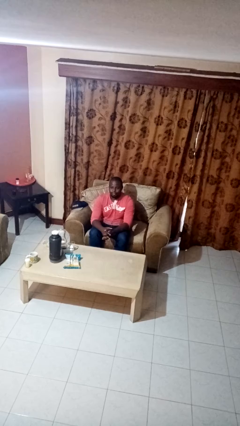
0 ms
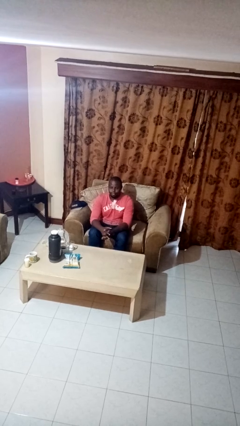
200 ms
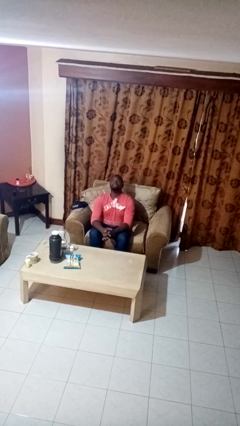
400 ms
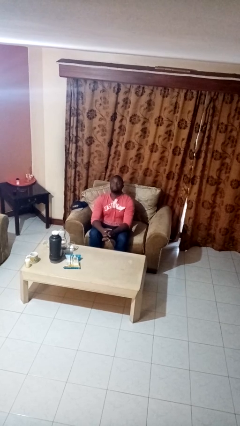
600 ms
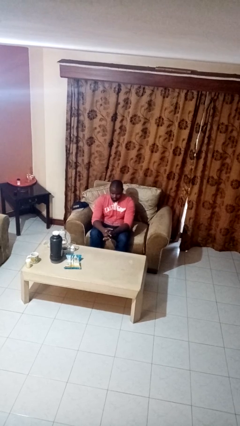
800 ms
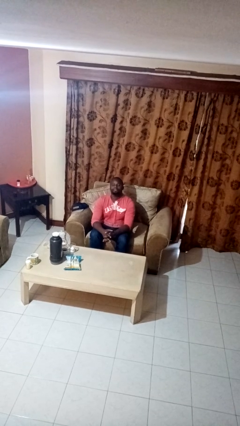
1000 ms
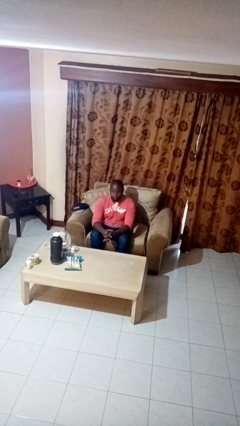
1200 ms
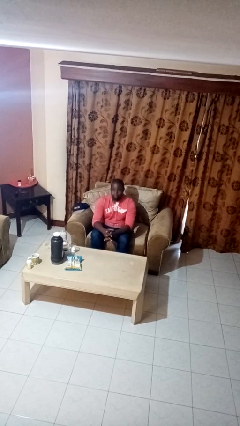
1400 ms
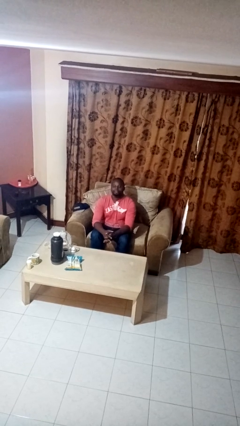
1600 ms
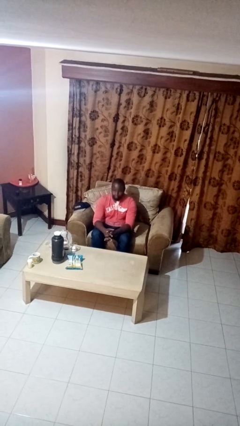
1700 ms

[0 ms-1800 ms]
person nods head

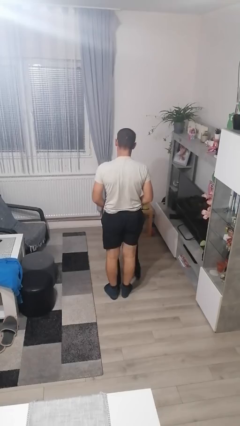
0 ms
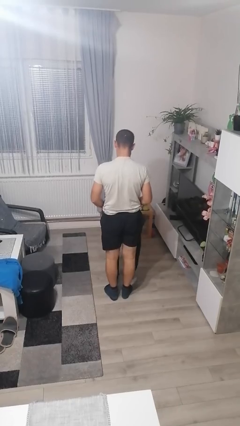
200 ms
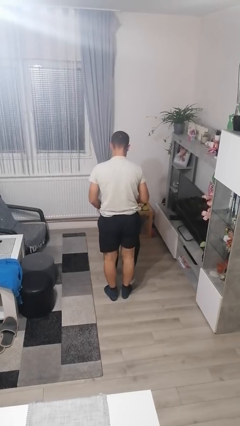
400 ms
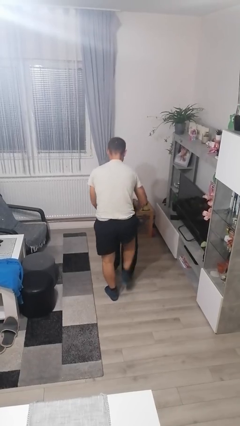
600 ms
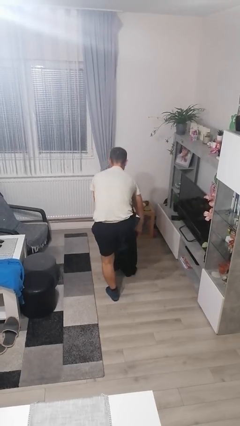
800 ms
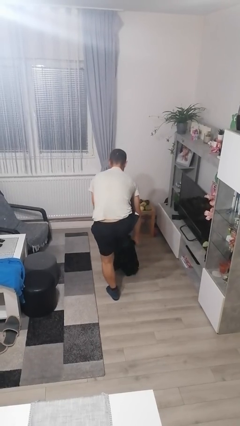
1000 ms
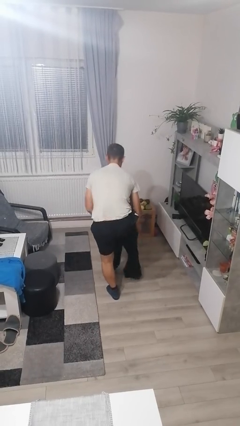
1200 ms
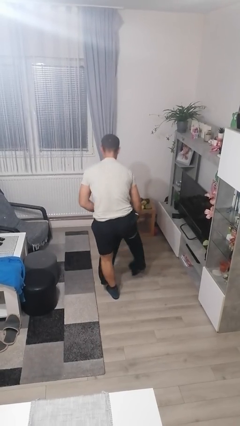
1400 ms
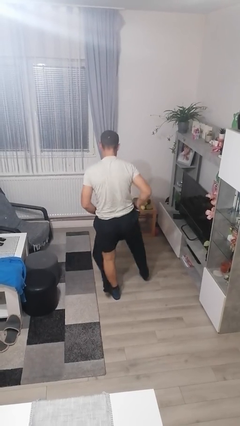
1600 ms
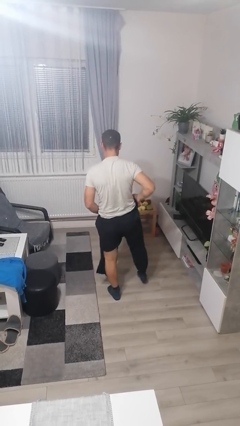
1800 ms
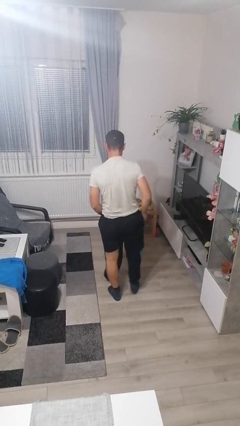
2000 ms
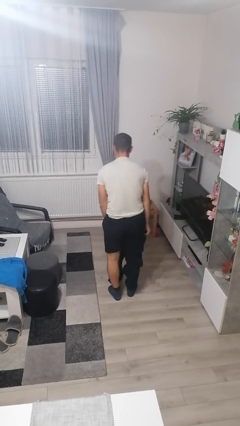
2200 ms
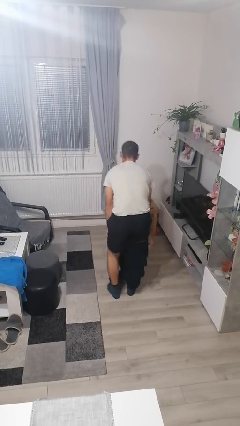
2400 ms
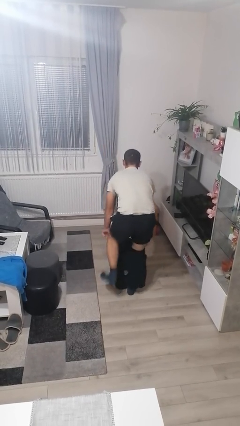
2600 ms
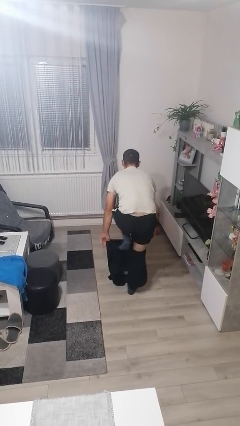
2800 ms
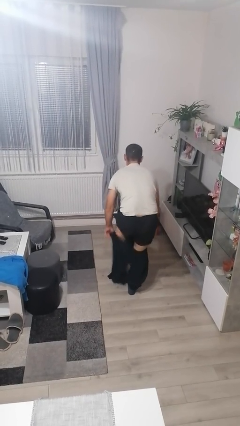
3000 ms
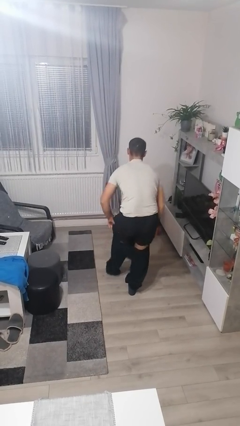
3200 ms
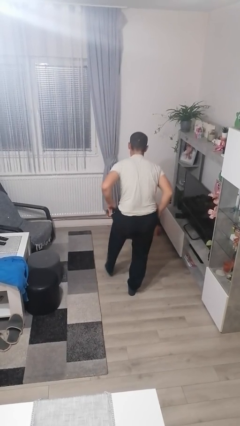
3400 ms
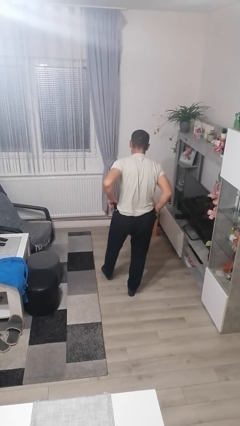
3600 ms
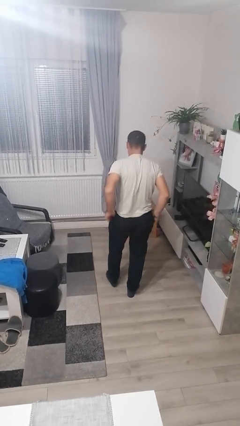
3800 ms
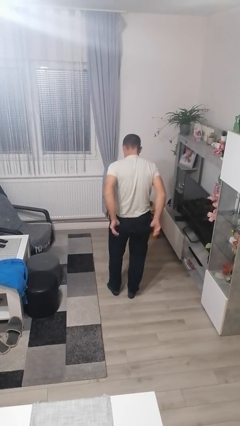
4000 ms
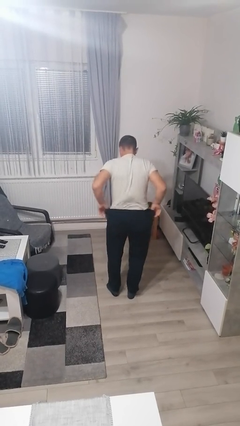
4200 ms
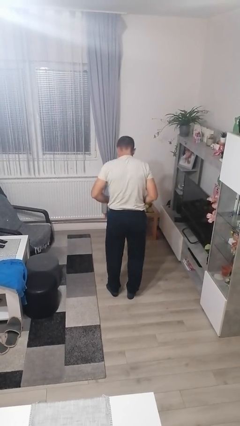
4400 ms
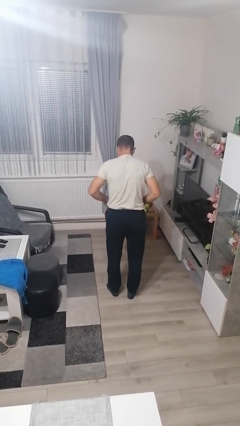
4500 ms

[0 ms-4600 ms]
person puts on pants

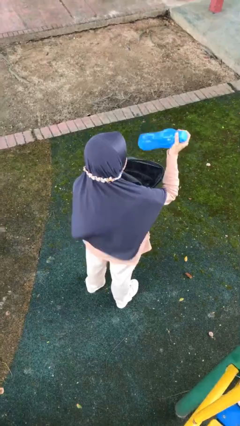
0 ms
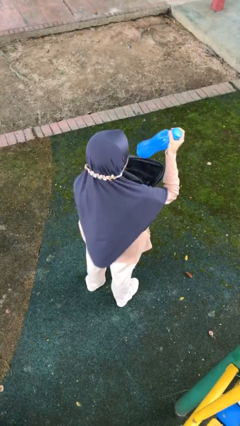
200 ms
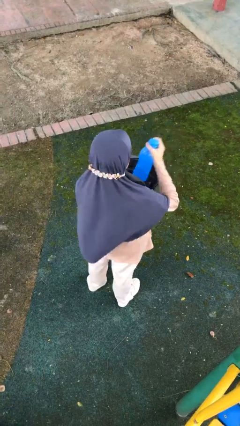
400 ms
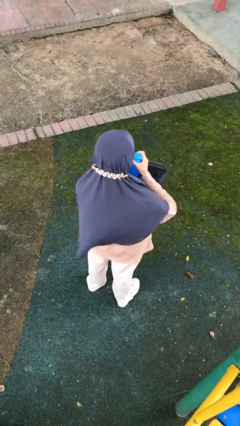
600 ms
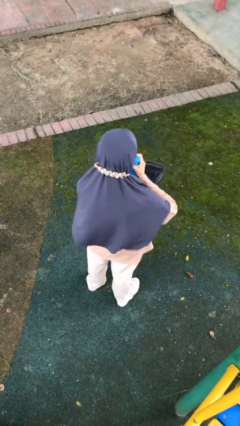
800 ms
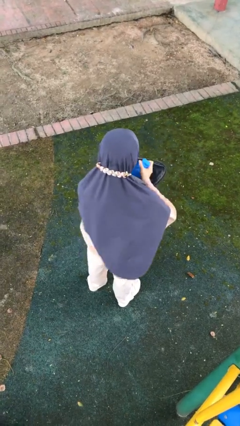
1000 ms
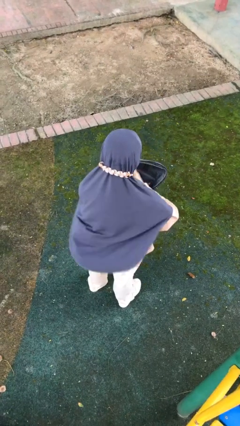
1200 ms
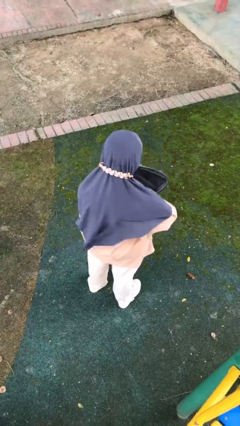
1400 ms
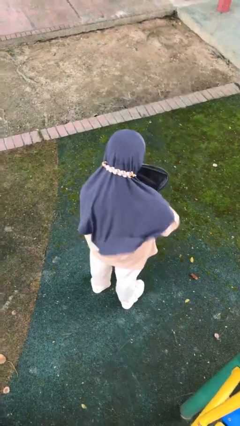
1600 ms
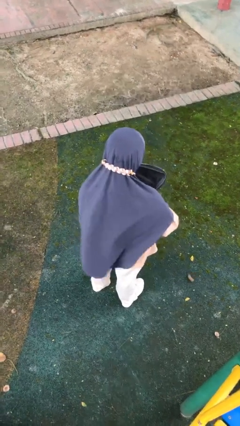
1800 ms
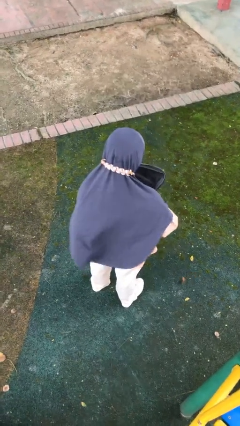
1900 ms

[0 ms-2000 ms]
person puts object into backpack

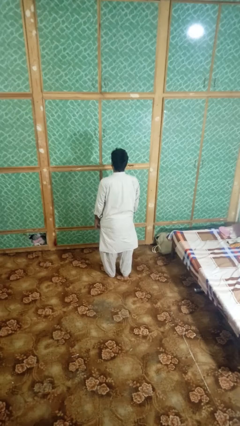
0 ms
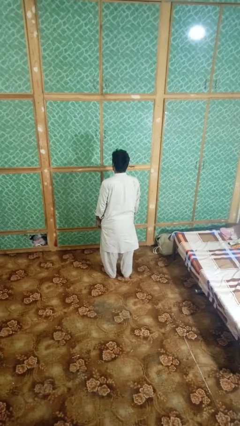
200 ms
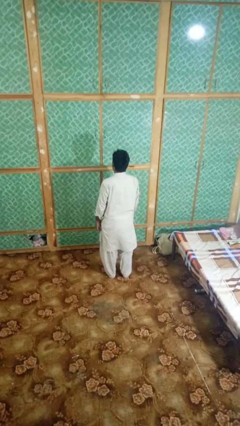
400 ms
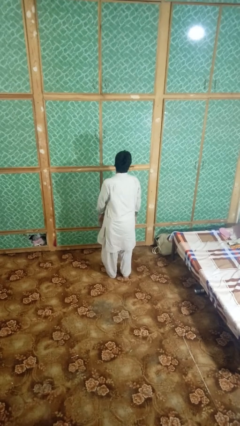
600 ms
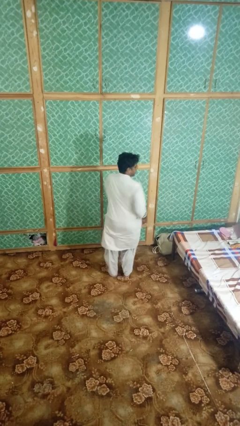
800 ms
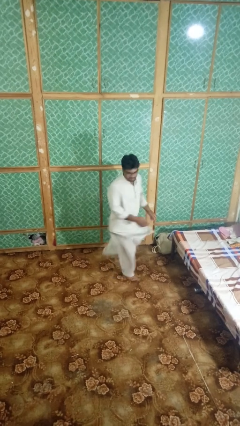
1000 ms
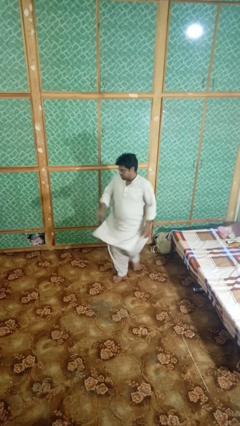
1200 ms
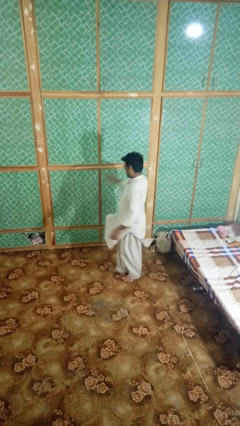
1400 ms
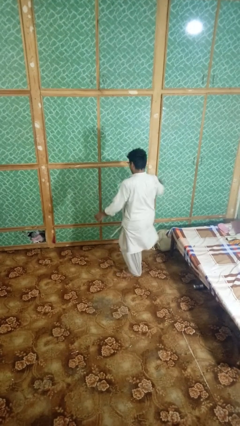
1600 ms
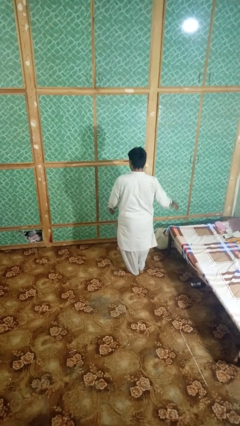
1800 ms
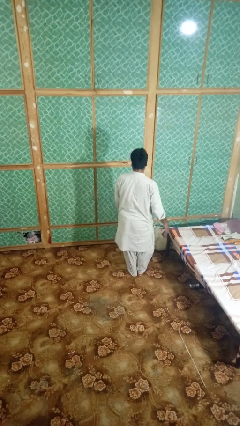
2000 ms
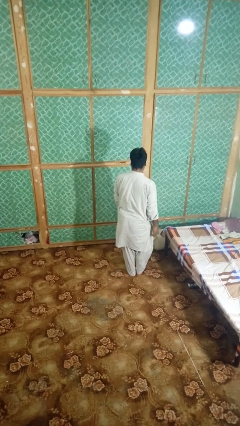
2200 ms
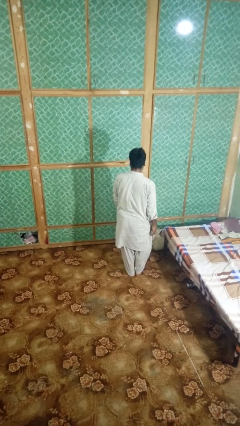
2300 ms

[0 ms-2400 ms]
person twirls

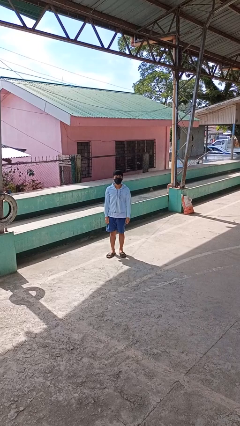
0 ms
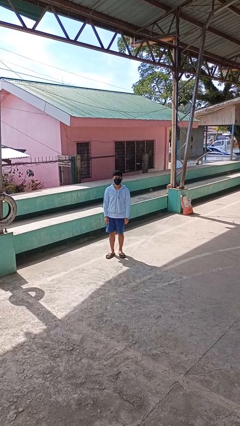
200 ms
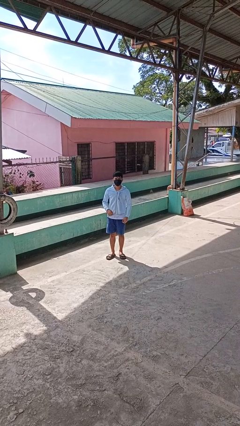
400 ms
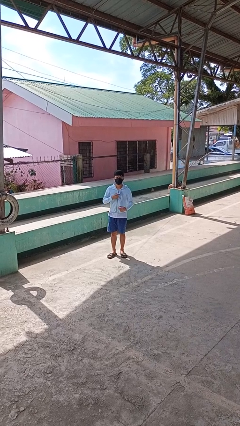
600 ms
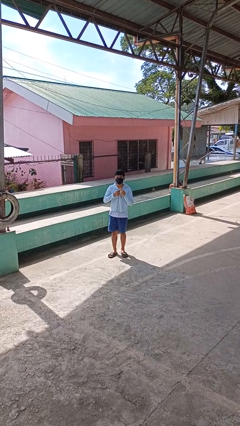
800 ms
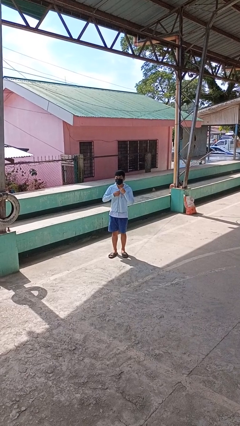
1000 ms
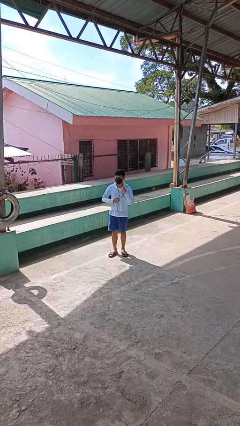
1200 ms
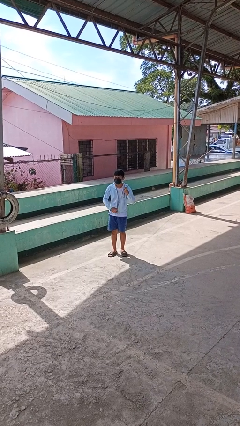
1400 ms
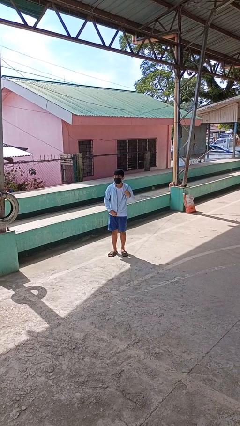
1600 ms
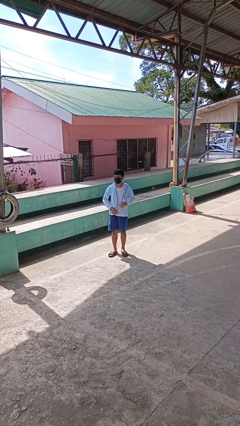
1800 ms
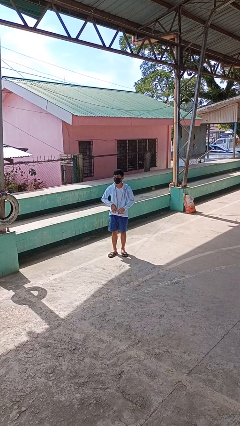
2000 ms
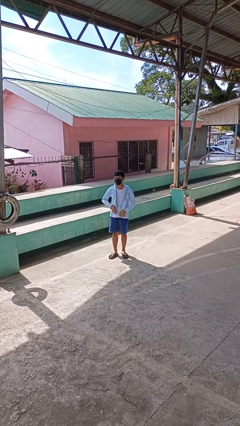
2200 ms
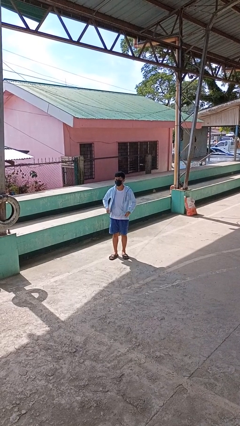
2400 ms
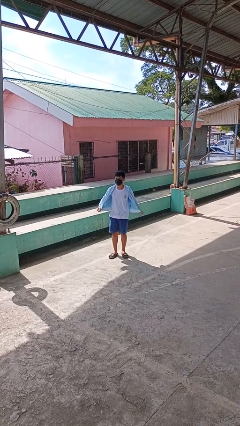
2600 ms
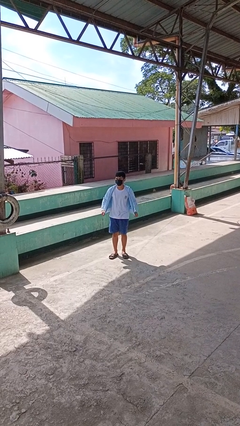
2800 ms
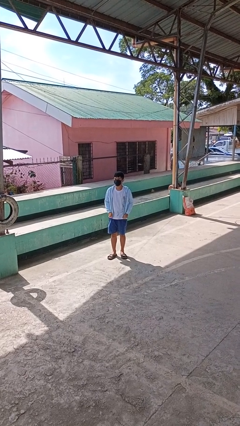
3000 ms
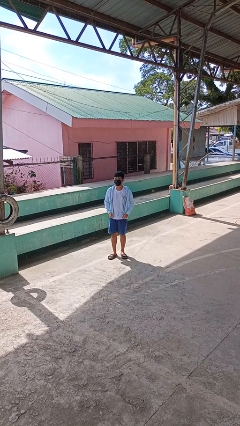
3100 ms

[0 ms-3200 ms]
person unzips jacket

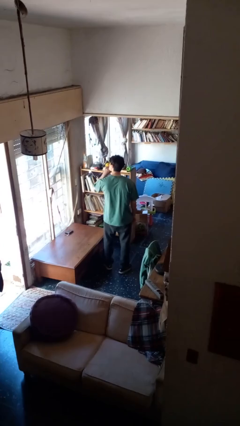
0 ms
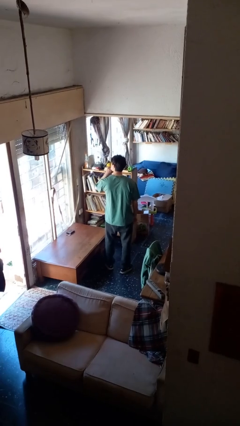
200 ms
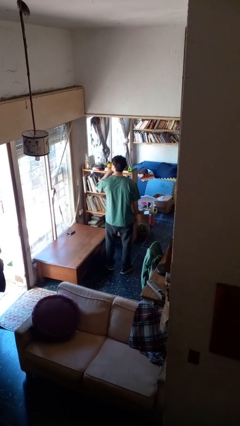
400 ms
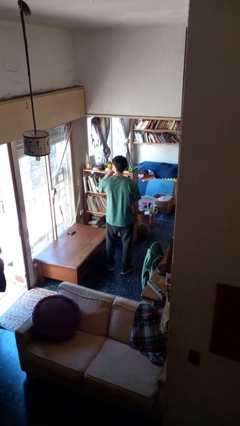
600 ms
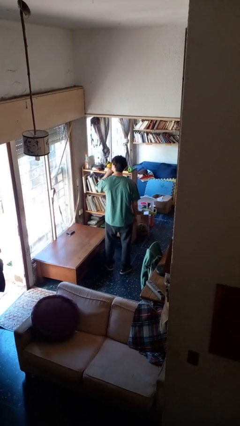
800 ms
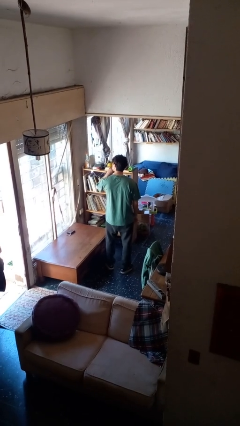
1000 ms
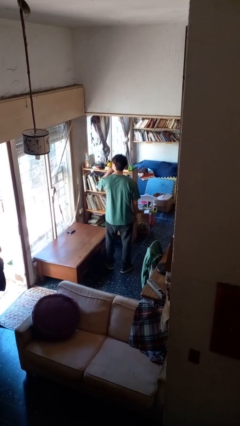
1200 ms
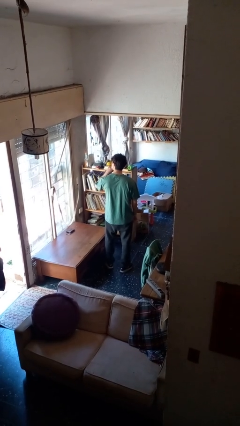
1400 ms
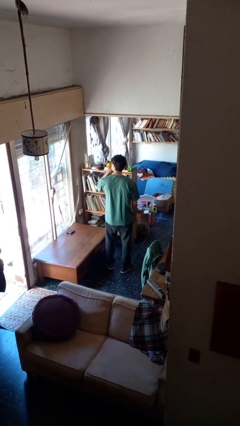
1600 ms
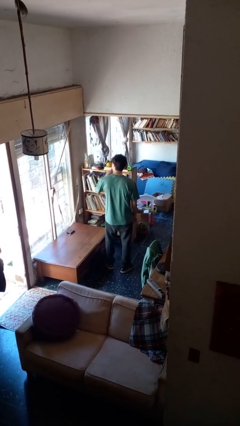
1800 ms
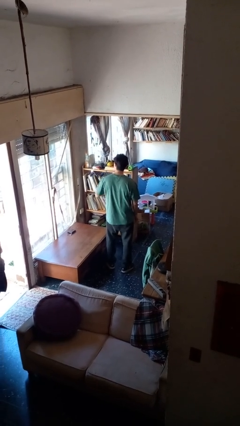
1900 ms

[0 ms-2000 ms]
person gestures be quiet

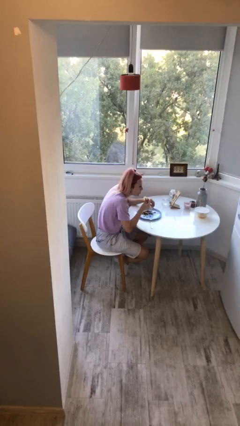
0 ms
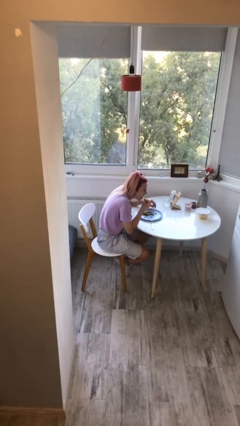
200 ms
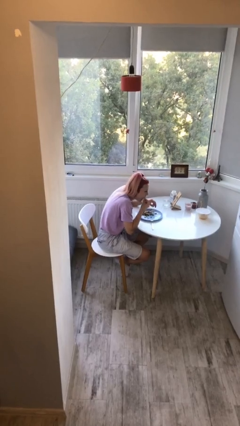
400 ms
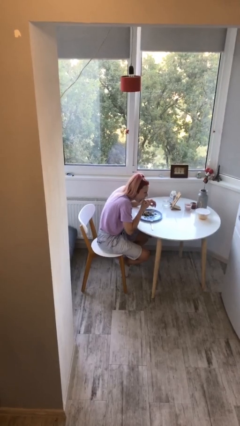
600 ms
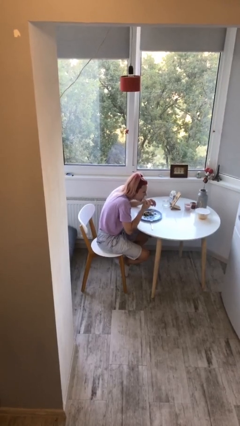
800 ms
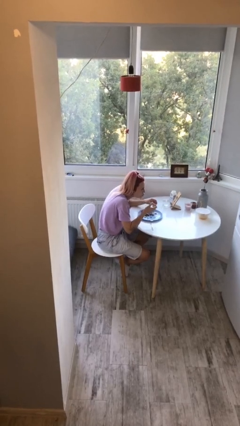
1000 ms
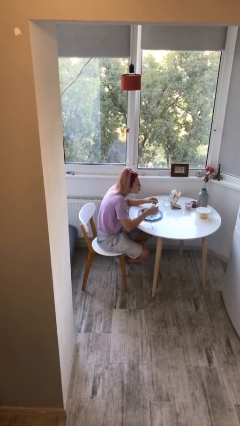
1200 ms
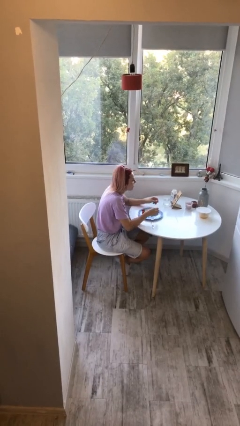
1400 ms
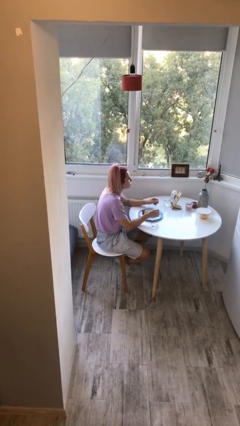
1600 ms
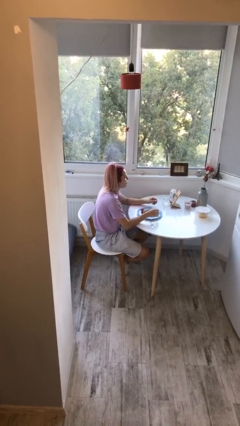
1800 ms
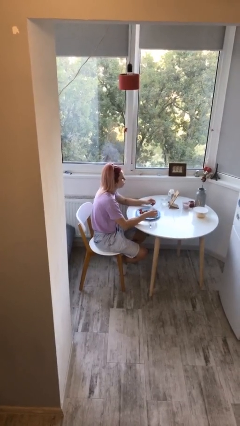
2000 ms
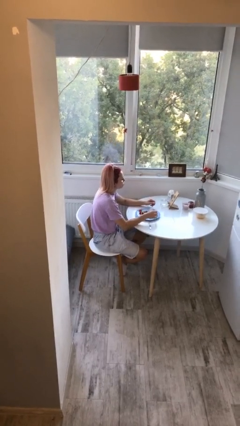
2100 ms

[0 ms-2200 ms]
person eats with hands
